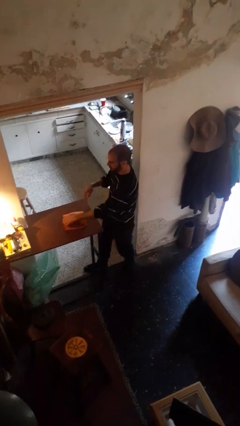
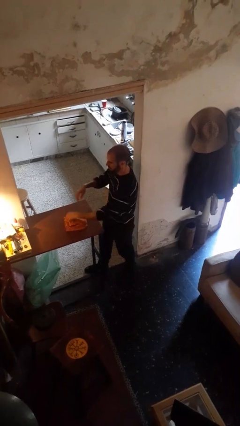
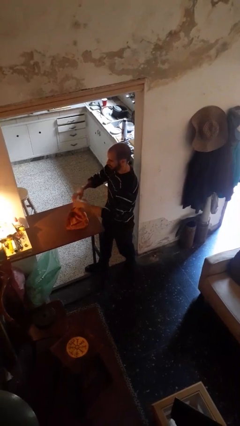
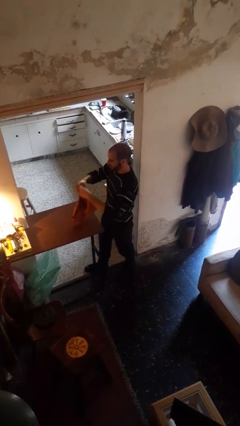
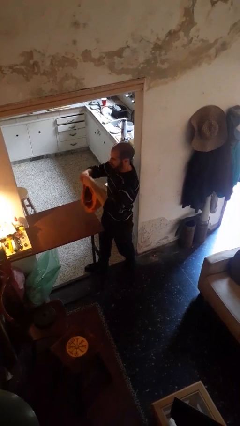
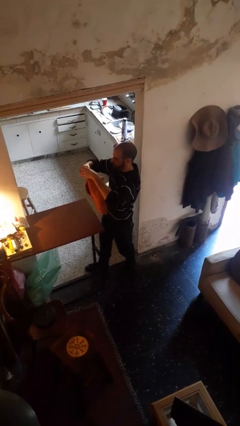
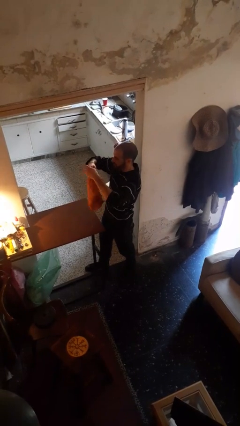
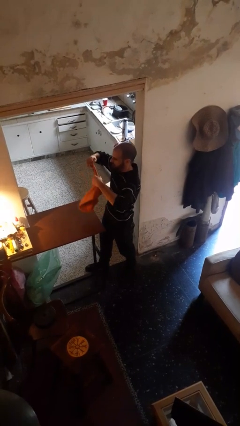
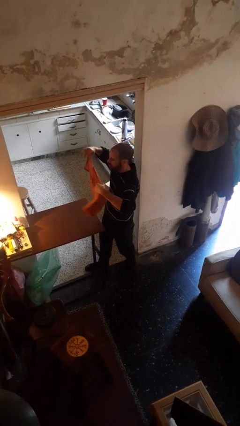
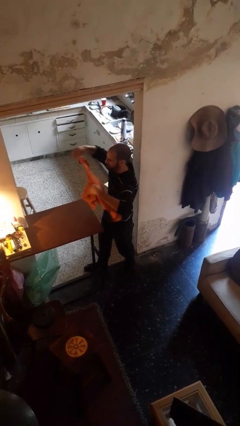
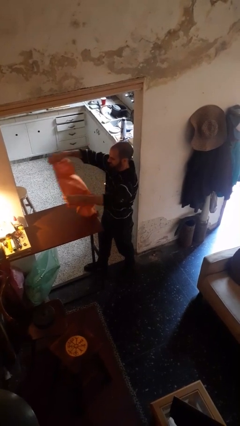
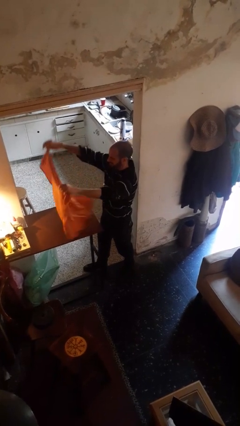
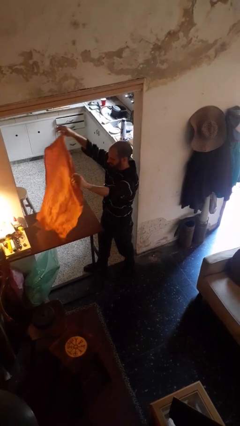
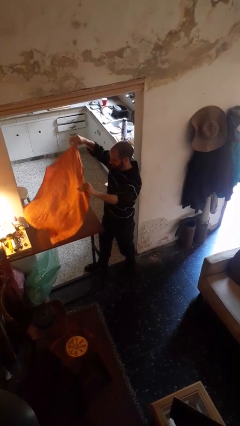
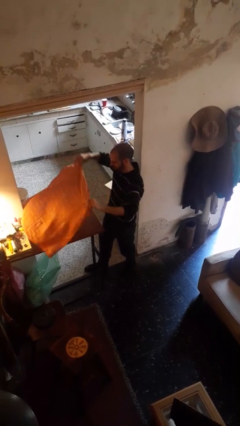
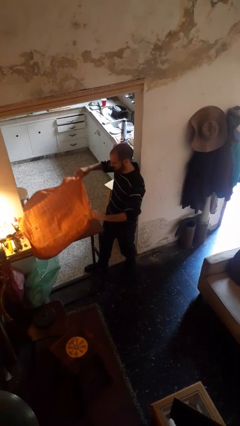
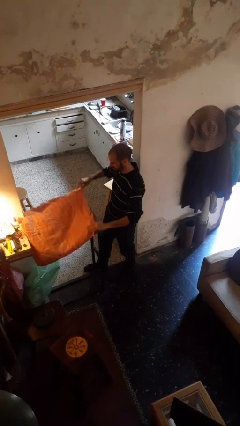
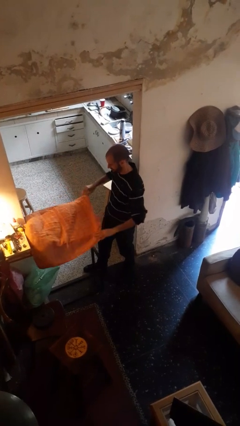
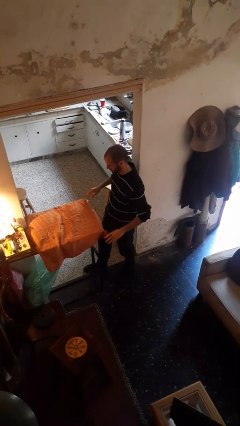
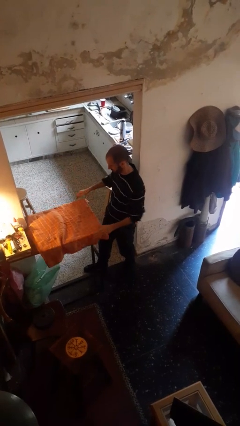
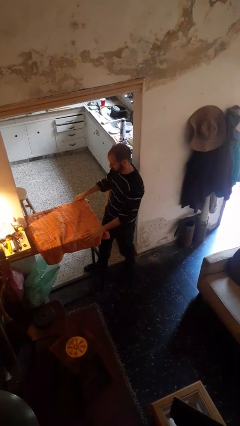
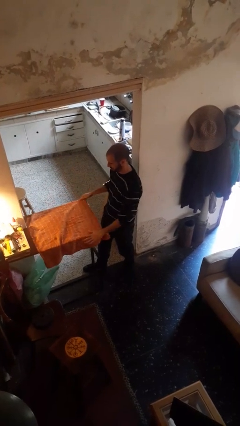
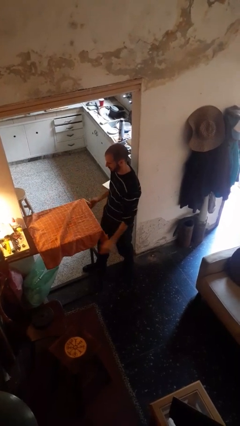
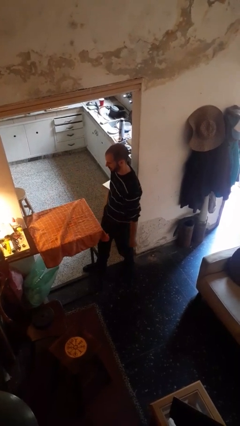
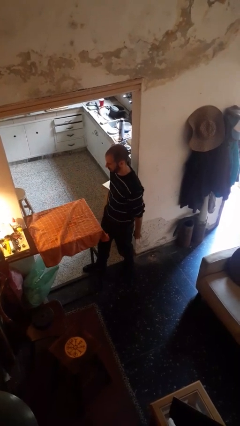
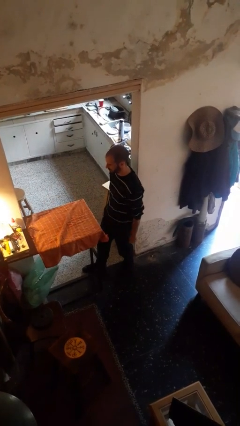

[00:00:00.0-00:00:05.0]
person spreads tablecloth

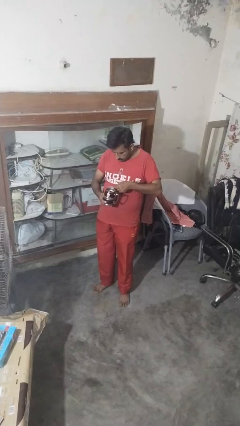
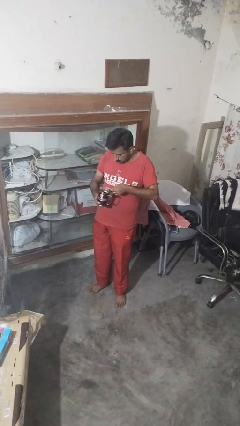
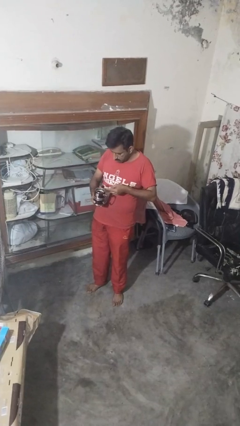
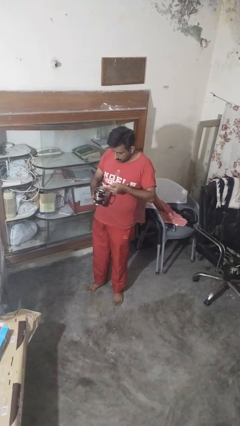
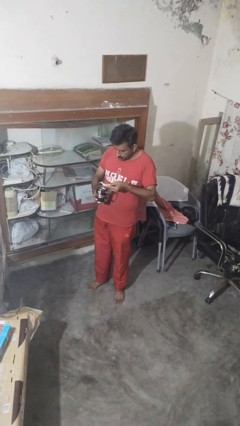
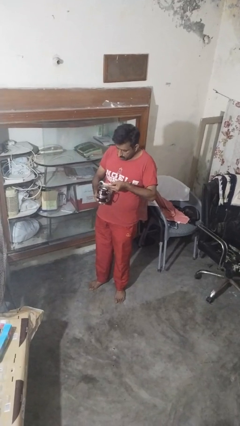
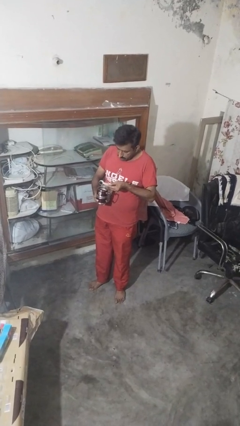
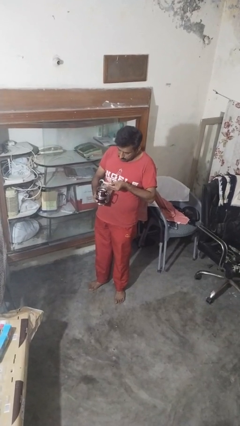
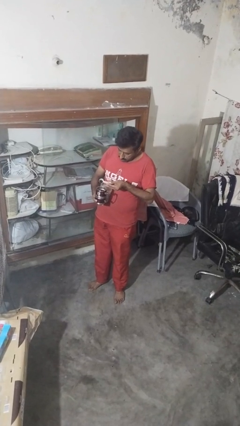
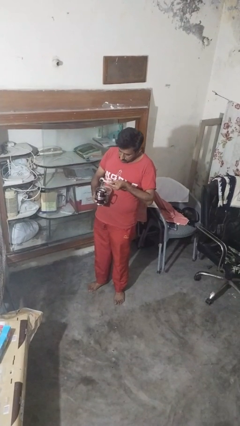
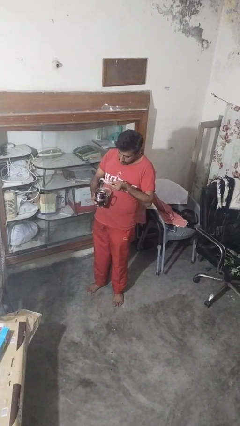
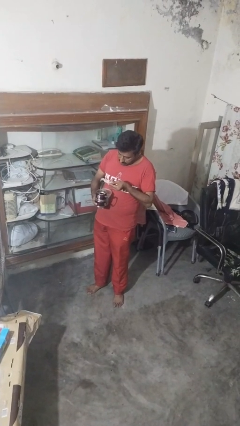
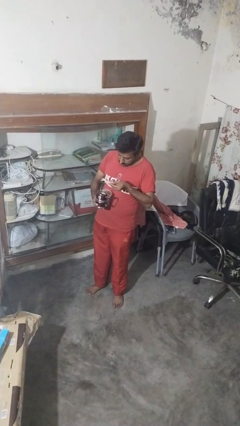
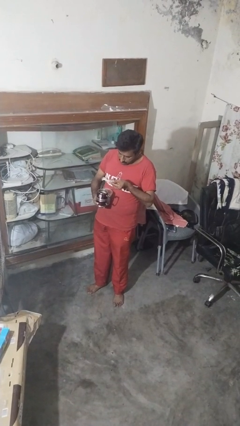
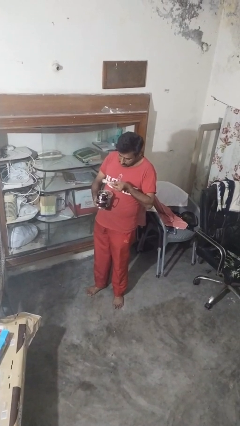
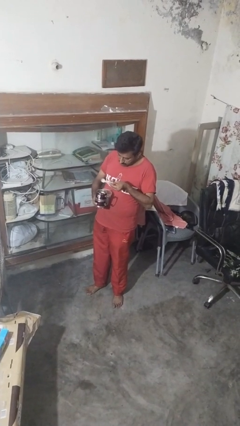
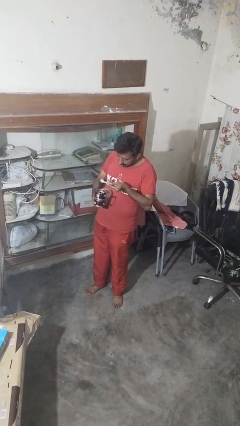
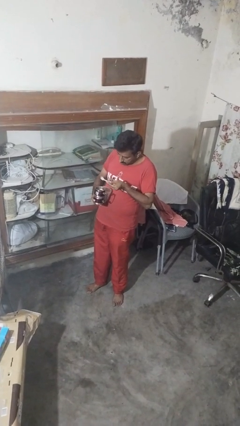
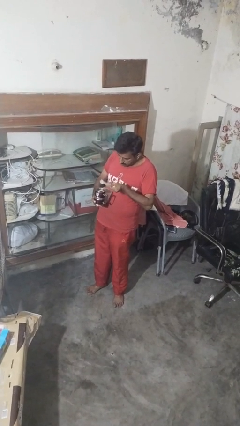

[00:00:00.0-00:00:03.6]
person pours coffee into mug

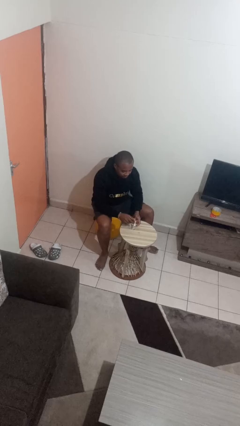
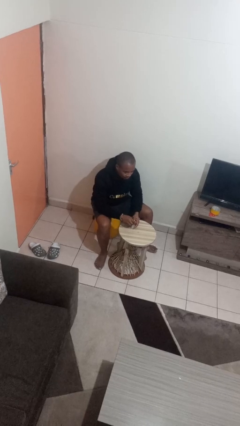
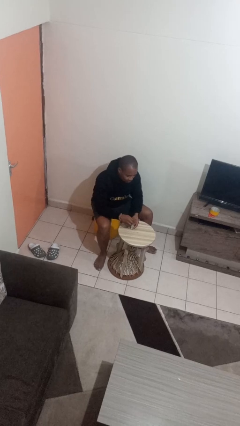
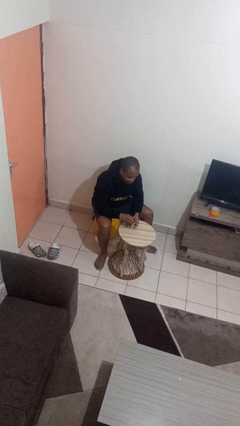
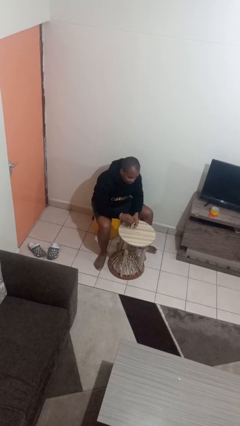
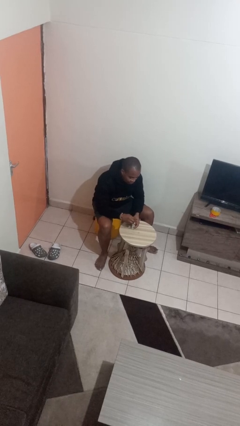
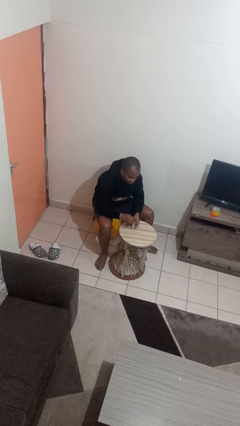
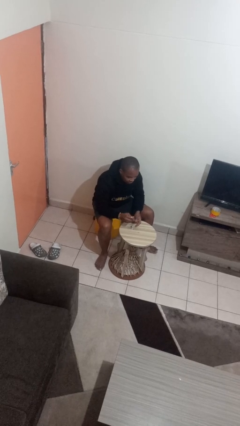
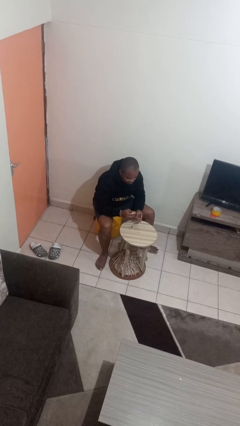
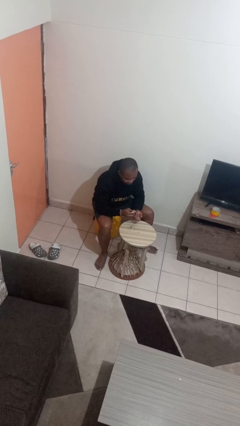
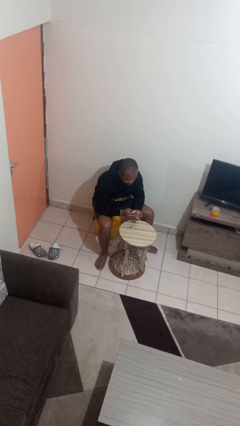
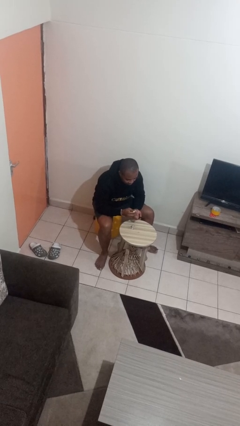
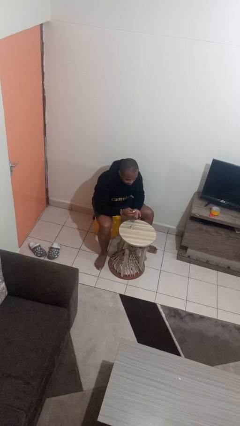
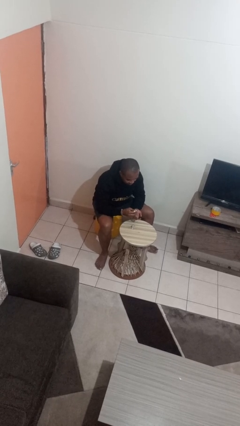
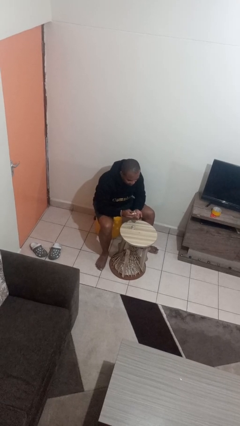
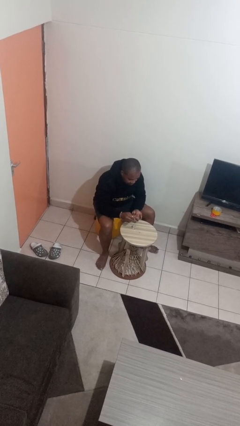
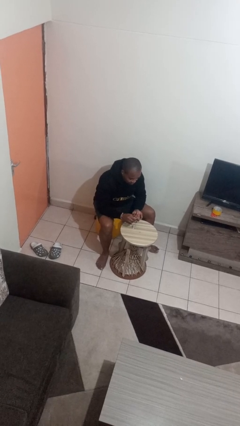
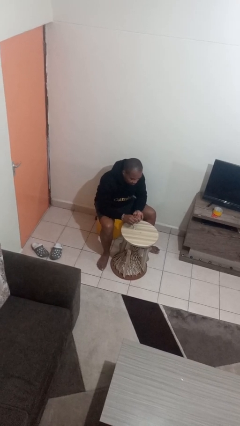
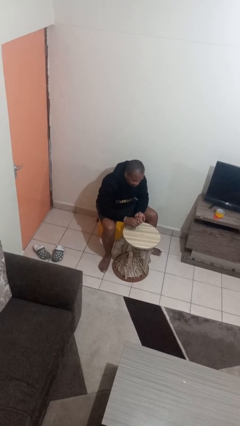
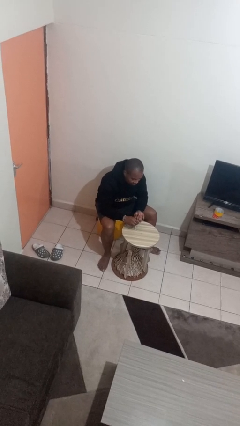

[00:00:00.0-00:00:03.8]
person paints fingernails

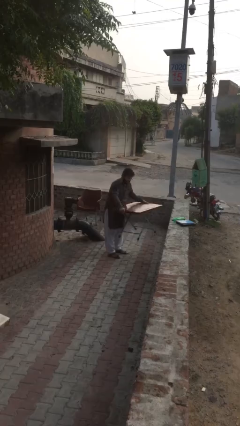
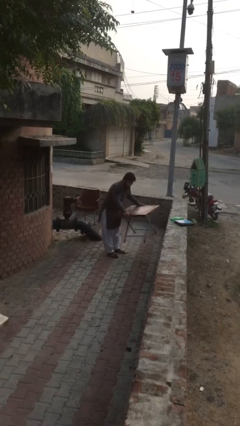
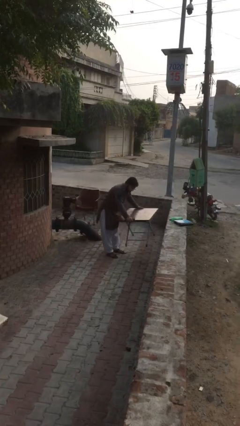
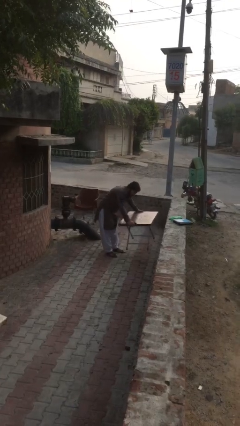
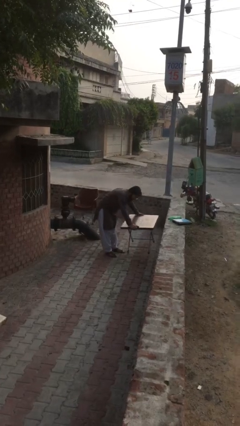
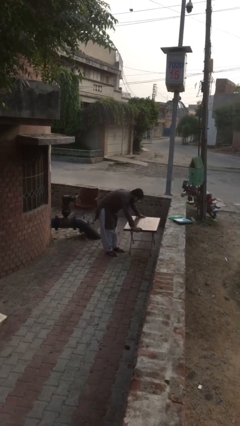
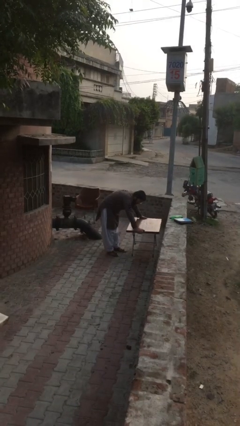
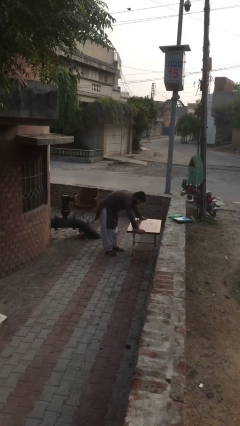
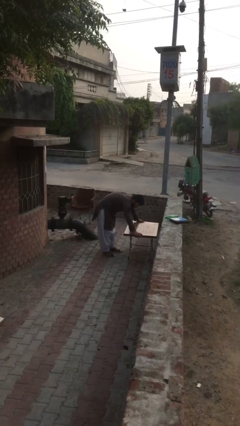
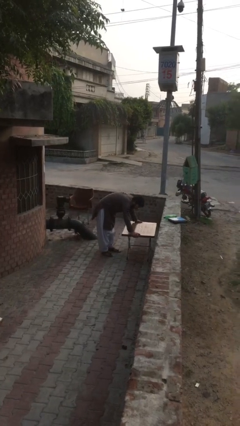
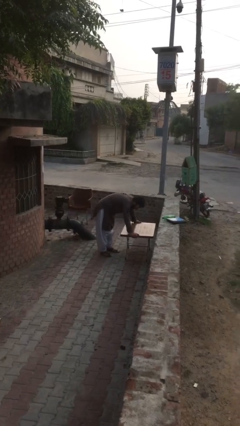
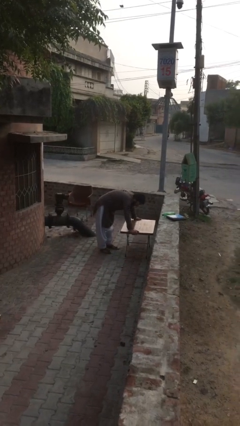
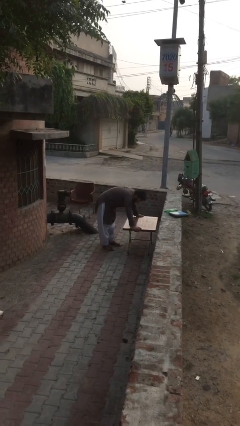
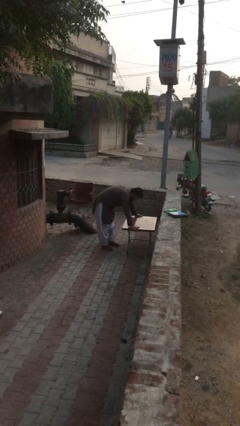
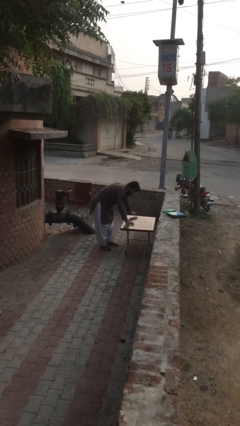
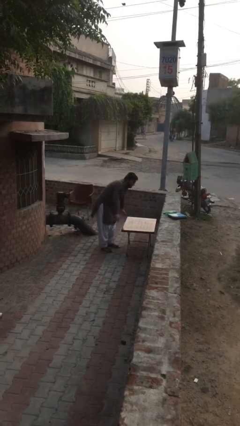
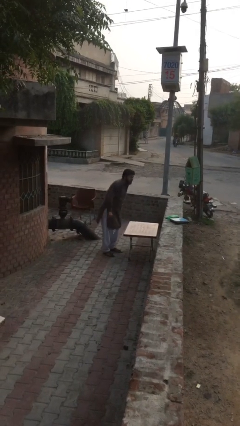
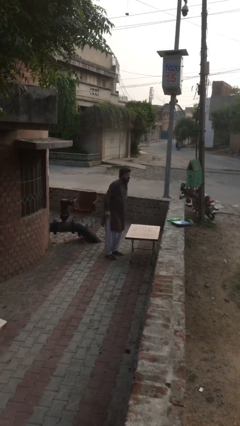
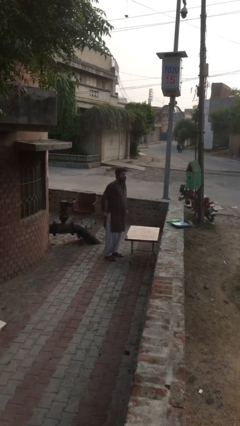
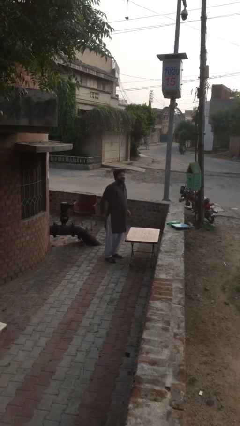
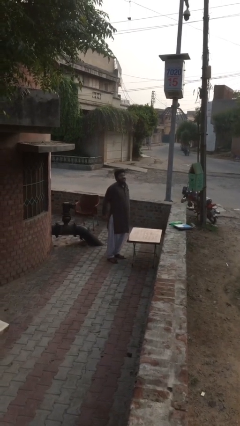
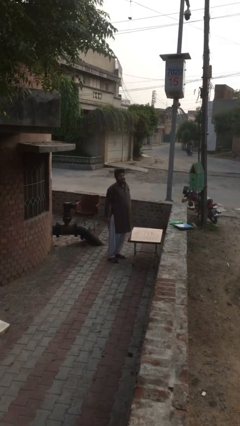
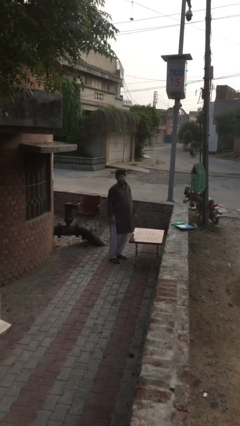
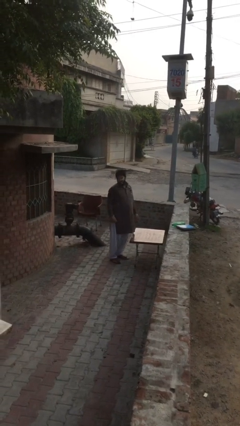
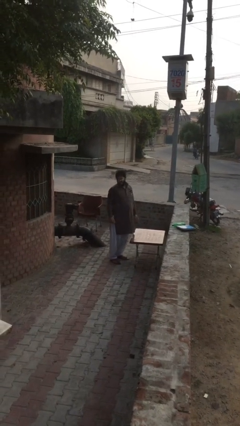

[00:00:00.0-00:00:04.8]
person puts down object on floor

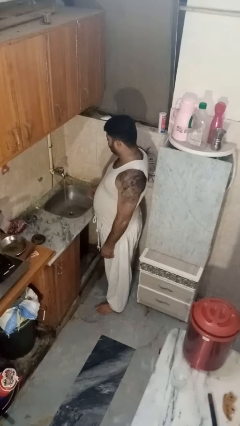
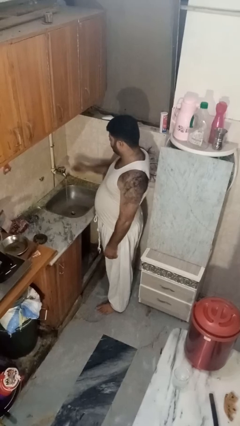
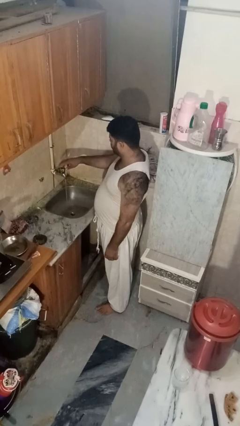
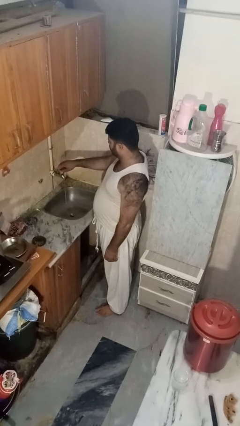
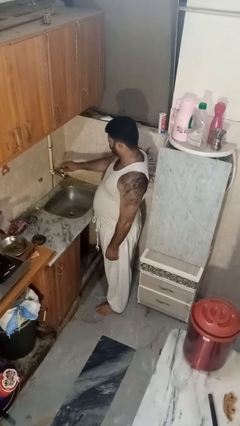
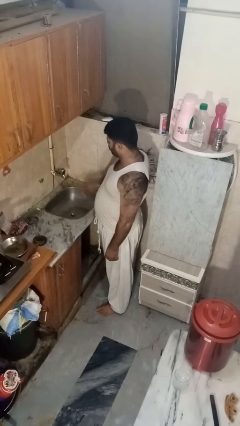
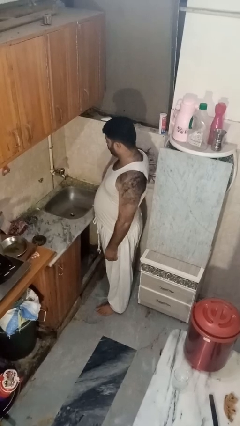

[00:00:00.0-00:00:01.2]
person turns off faucet
